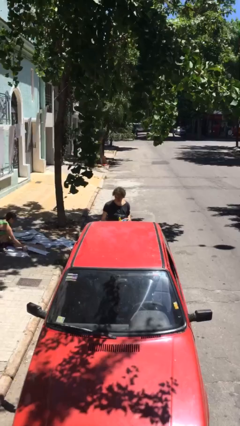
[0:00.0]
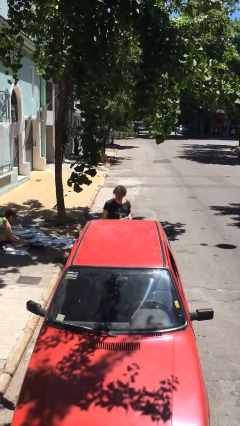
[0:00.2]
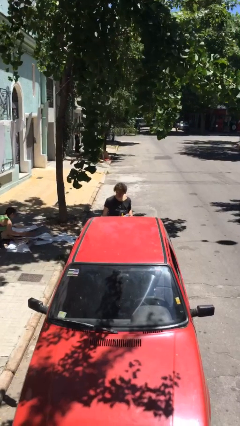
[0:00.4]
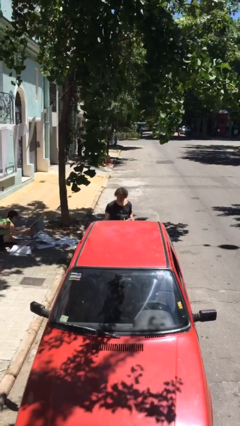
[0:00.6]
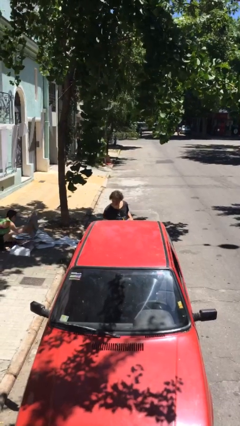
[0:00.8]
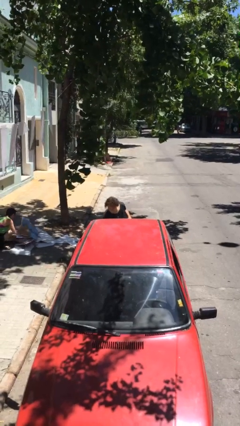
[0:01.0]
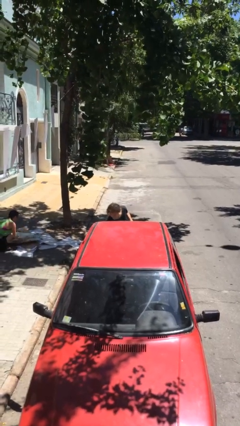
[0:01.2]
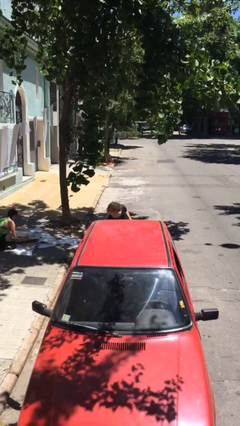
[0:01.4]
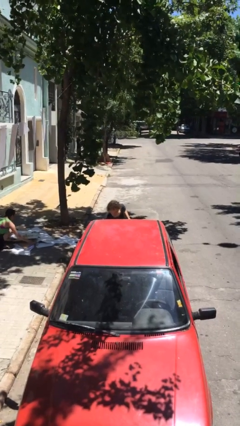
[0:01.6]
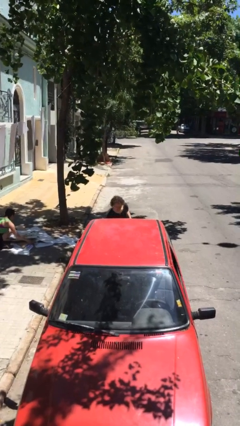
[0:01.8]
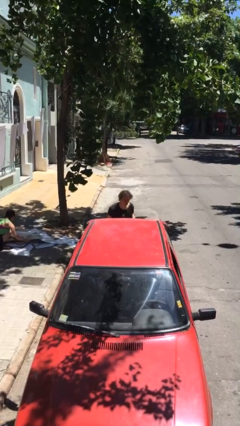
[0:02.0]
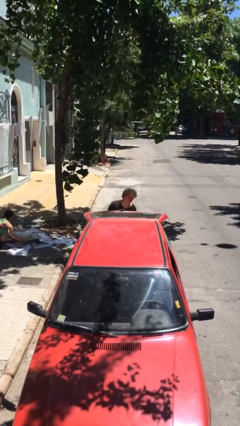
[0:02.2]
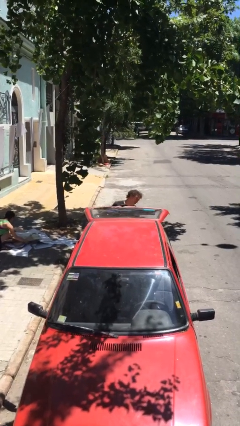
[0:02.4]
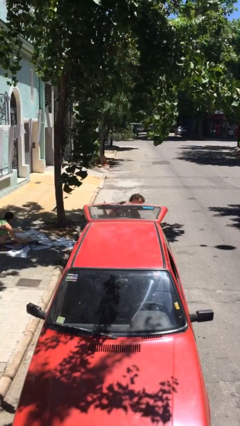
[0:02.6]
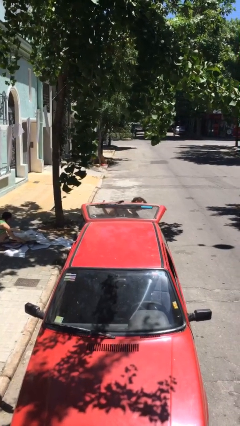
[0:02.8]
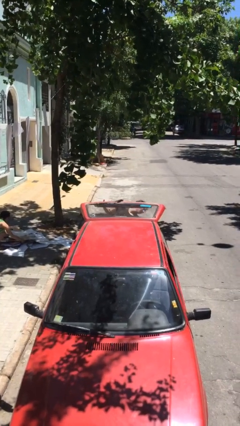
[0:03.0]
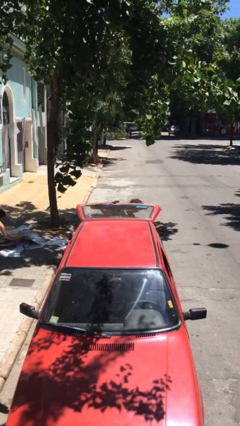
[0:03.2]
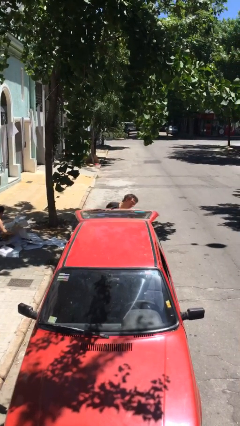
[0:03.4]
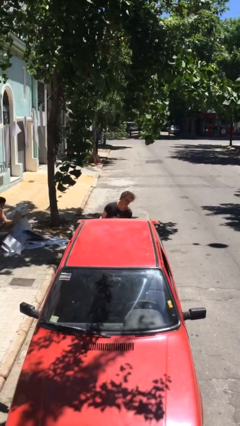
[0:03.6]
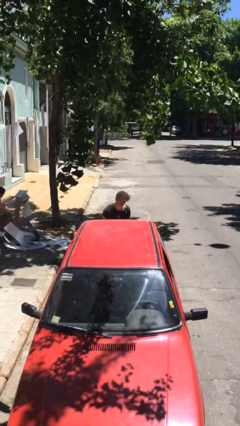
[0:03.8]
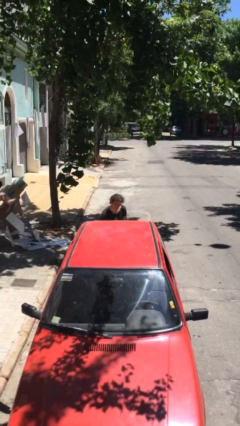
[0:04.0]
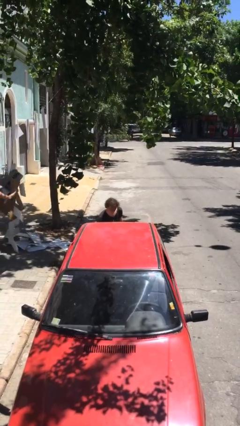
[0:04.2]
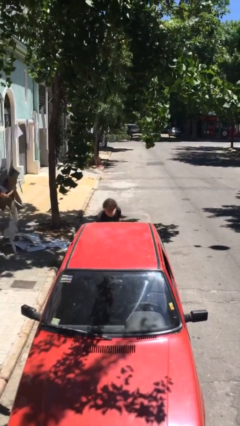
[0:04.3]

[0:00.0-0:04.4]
person loads car

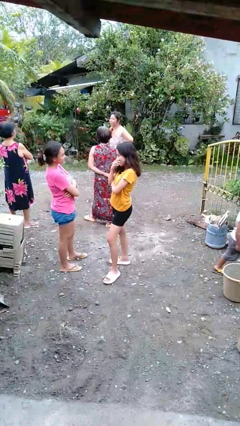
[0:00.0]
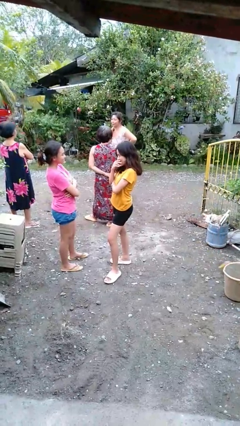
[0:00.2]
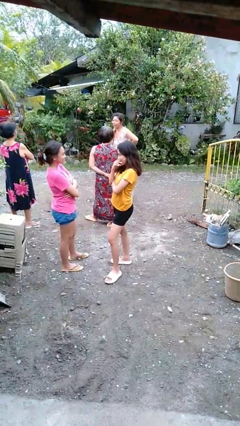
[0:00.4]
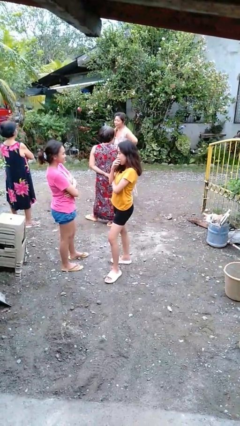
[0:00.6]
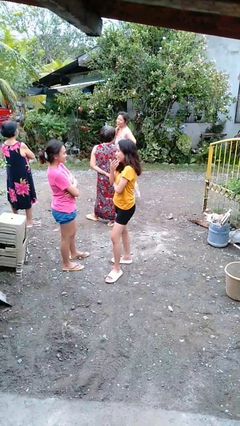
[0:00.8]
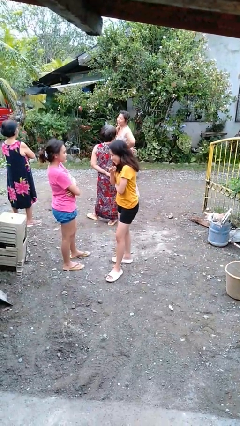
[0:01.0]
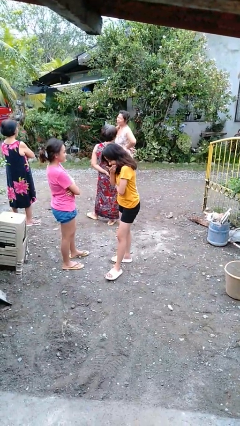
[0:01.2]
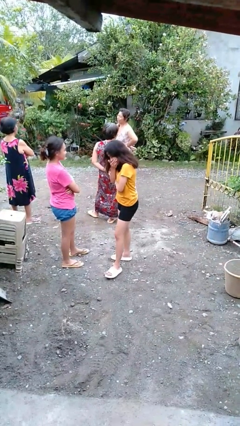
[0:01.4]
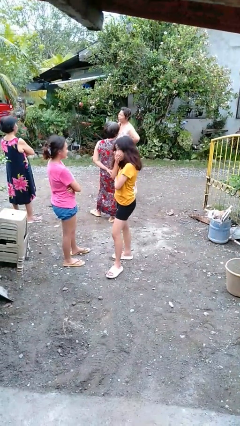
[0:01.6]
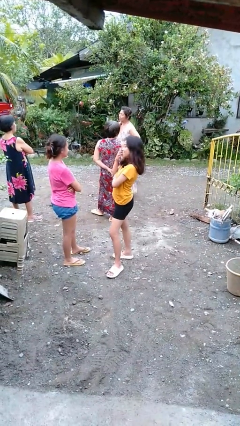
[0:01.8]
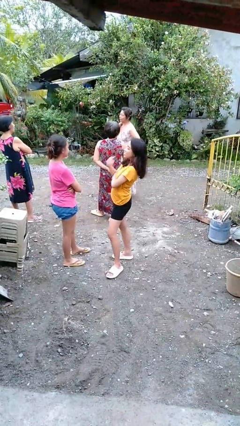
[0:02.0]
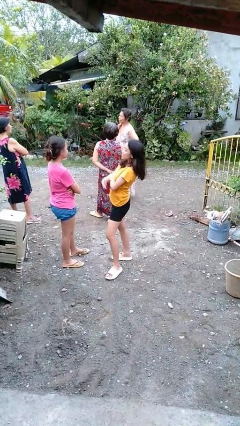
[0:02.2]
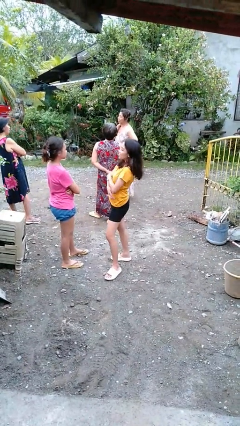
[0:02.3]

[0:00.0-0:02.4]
person laughs with person

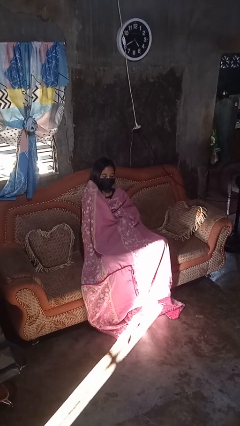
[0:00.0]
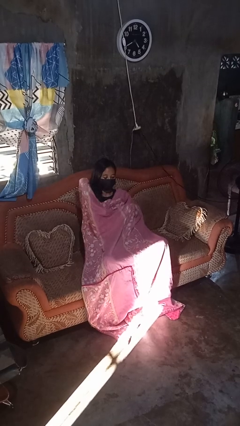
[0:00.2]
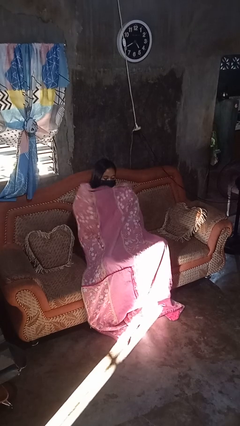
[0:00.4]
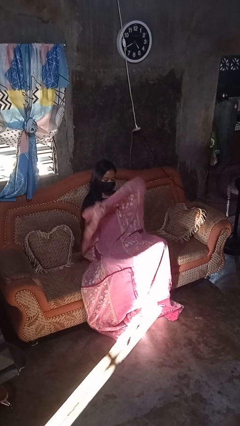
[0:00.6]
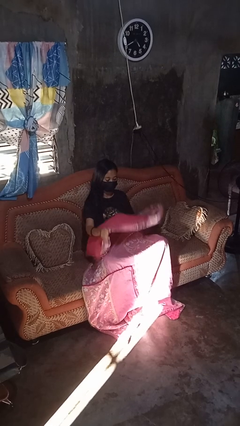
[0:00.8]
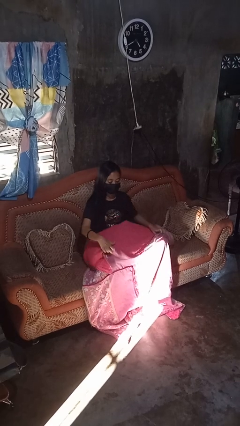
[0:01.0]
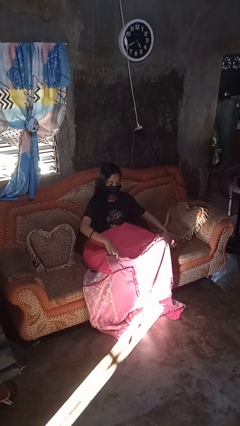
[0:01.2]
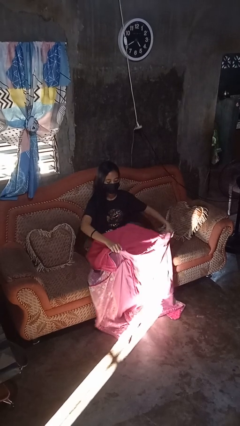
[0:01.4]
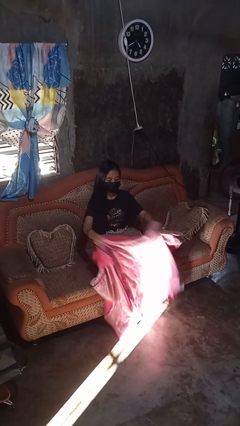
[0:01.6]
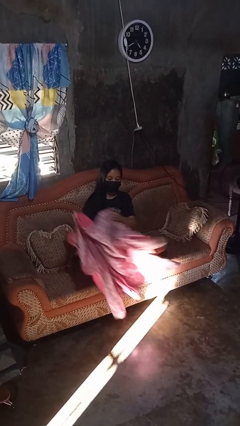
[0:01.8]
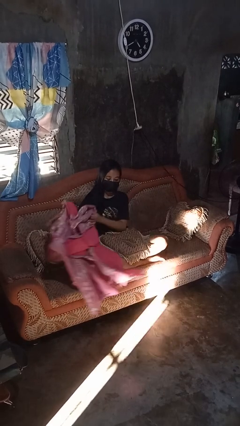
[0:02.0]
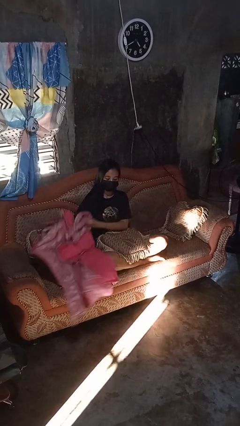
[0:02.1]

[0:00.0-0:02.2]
person uncovers with blanket

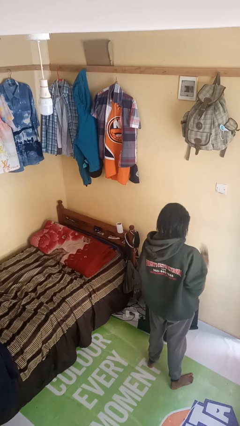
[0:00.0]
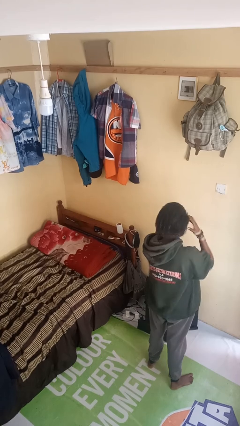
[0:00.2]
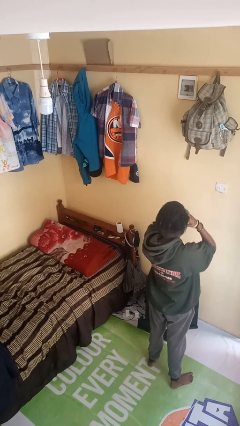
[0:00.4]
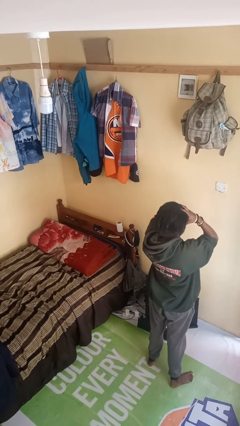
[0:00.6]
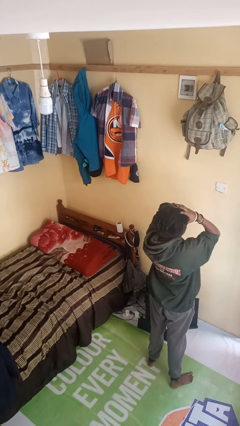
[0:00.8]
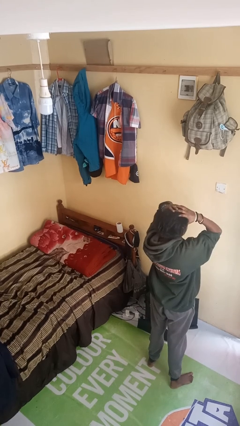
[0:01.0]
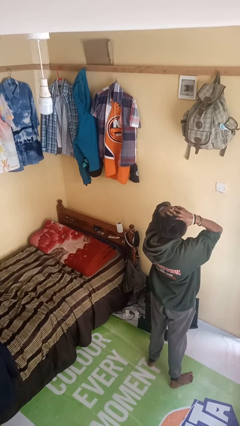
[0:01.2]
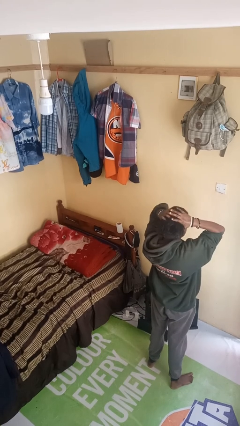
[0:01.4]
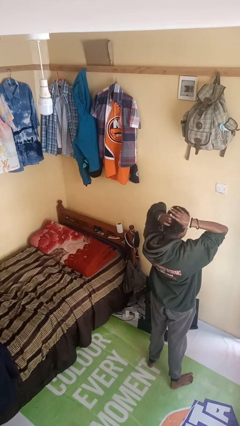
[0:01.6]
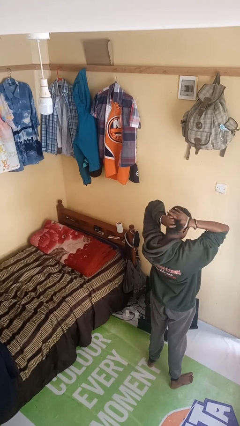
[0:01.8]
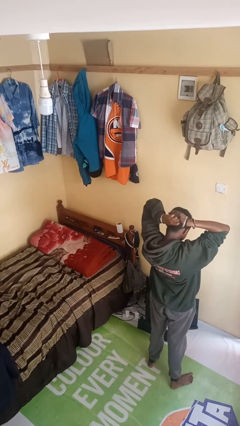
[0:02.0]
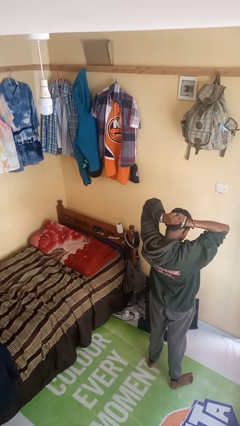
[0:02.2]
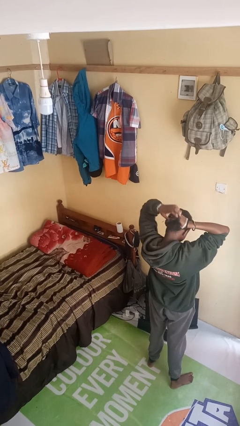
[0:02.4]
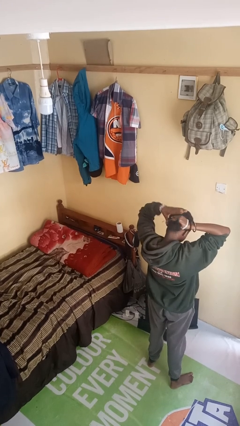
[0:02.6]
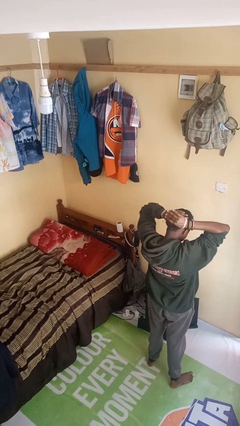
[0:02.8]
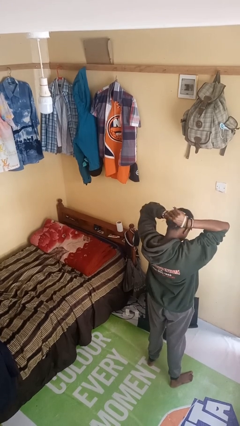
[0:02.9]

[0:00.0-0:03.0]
person strokes hair

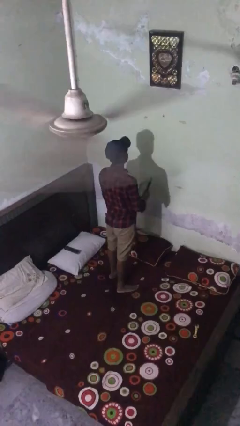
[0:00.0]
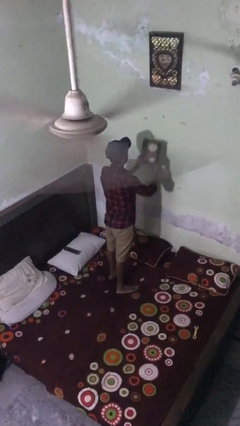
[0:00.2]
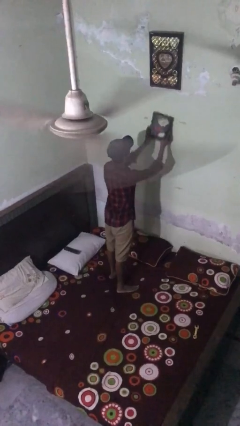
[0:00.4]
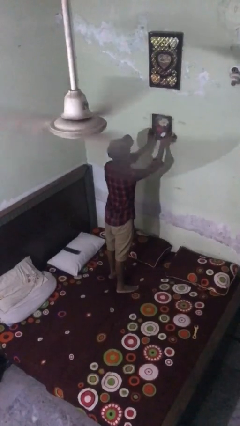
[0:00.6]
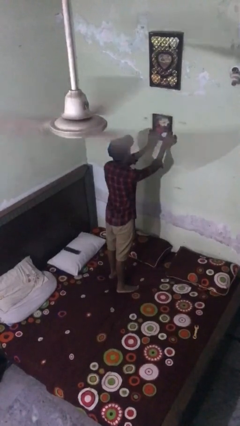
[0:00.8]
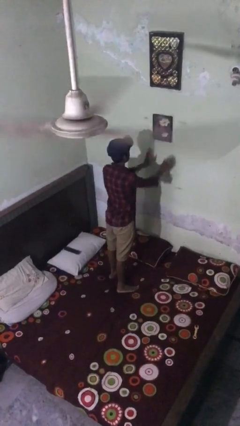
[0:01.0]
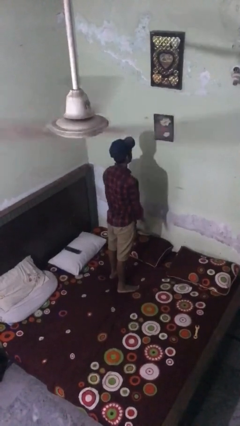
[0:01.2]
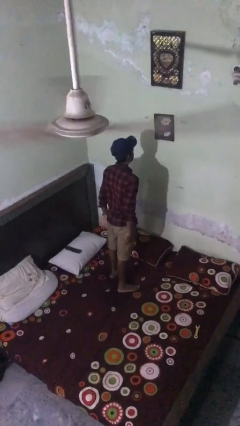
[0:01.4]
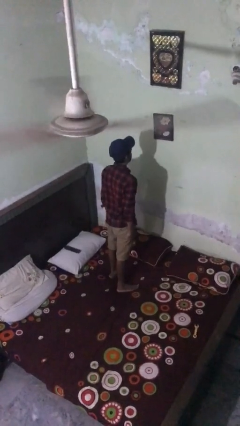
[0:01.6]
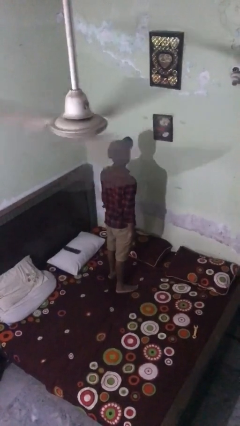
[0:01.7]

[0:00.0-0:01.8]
person puts up picture frame

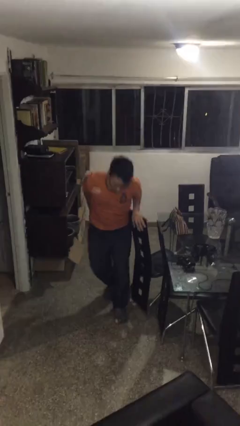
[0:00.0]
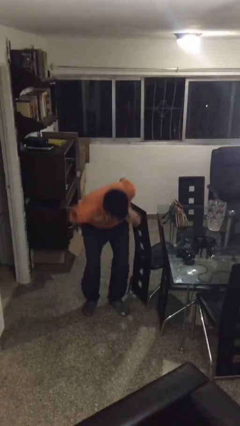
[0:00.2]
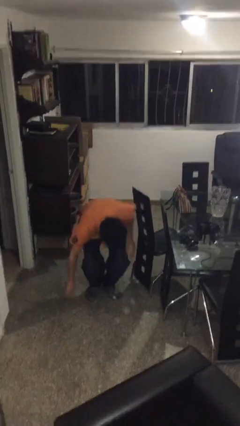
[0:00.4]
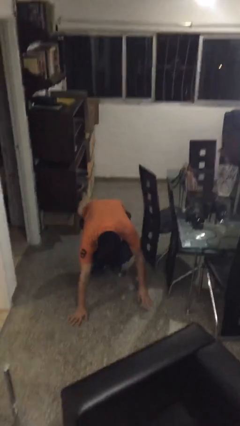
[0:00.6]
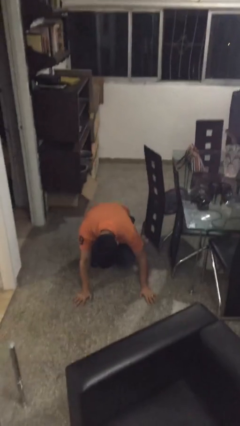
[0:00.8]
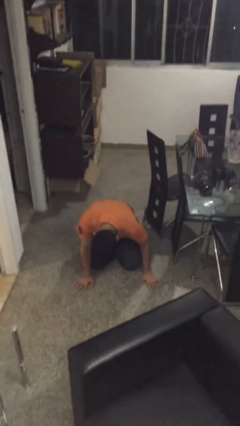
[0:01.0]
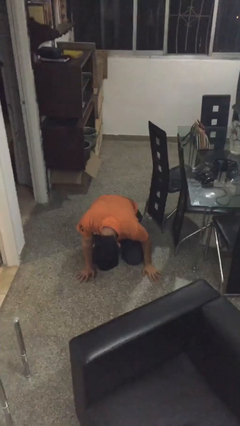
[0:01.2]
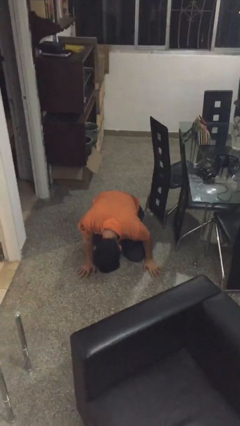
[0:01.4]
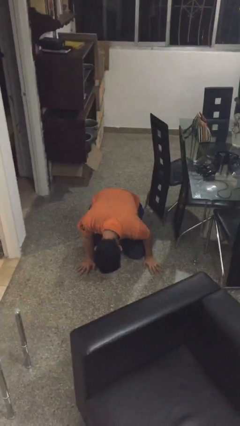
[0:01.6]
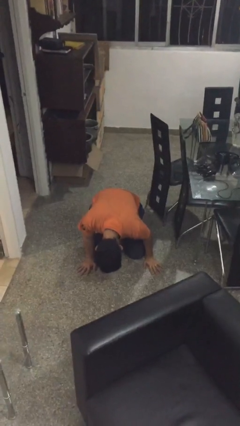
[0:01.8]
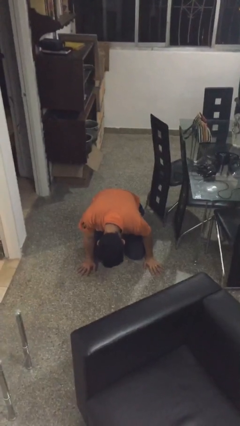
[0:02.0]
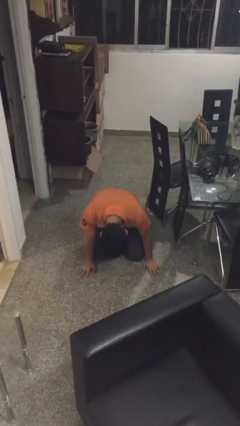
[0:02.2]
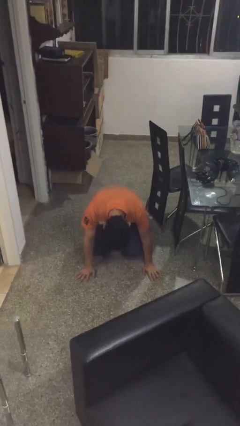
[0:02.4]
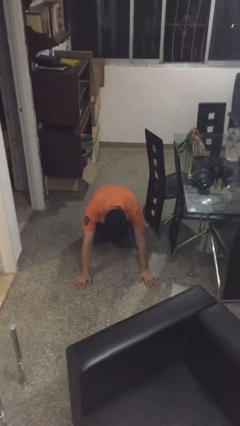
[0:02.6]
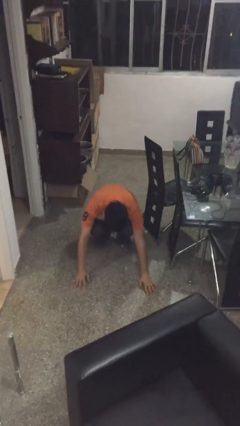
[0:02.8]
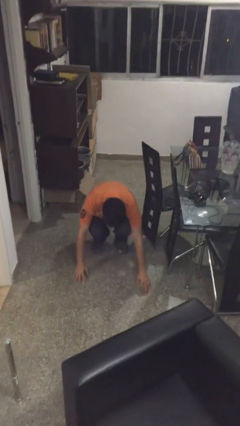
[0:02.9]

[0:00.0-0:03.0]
person lies down on floor

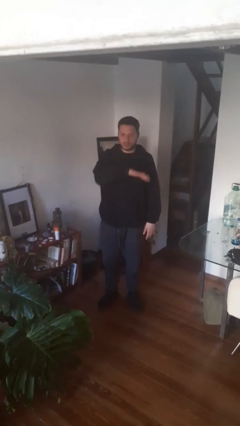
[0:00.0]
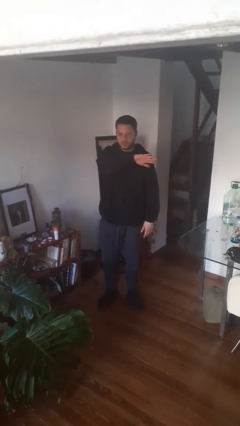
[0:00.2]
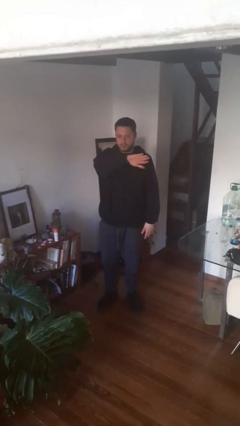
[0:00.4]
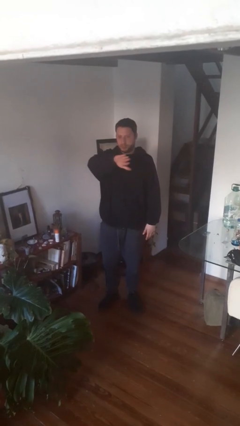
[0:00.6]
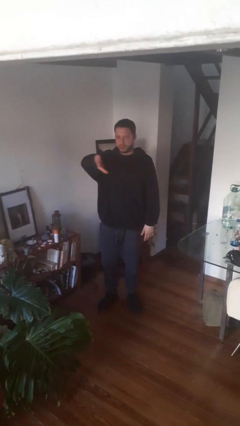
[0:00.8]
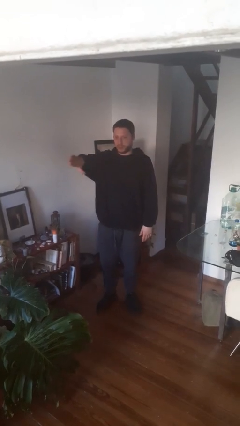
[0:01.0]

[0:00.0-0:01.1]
person gestures swipe right
